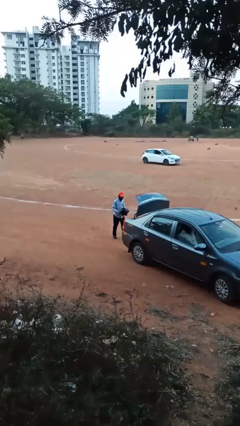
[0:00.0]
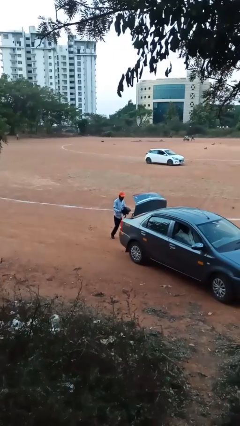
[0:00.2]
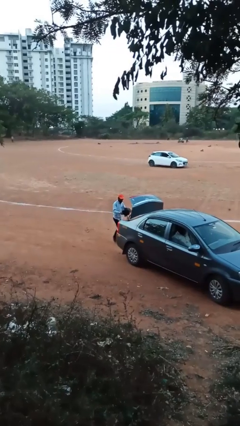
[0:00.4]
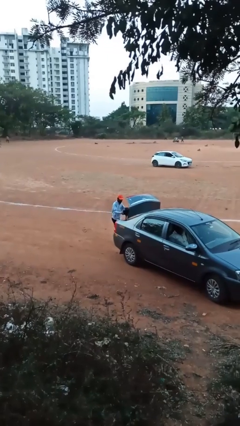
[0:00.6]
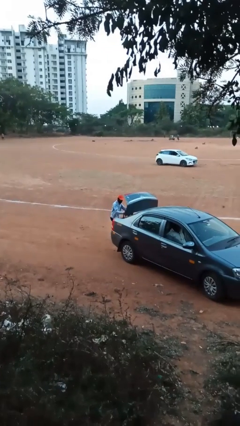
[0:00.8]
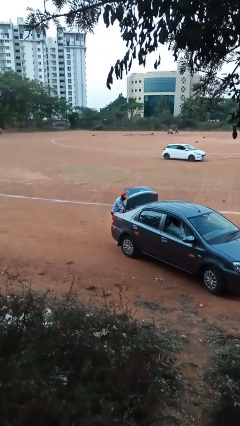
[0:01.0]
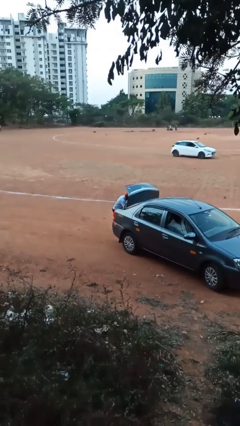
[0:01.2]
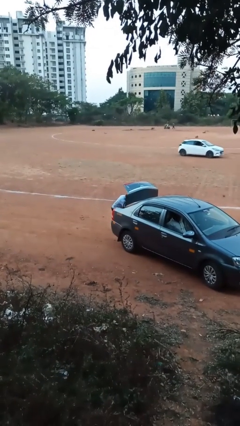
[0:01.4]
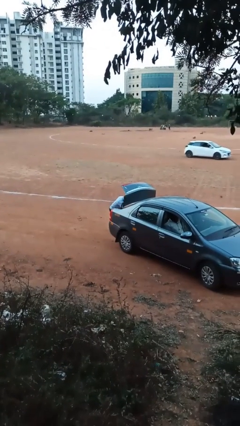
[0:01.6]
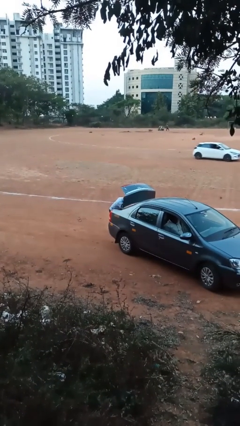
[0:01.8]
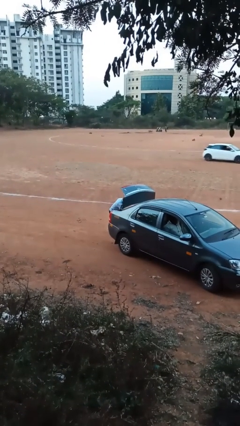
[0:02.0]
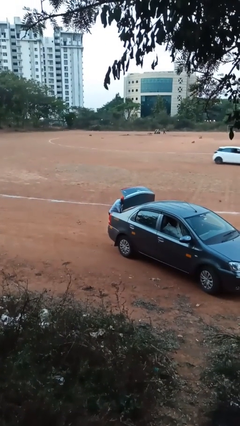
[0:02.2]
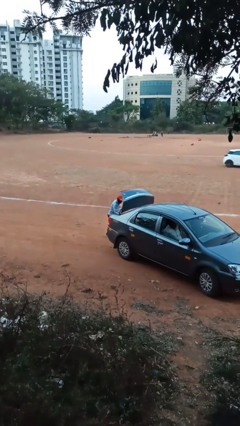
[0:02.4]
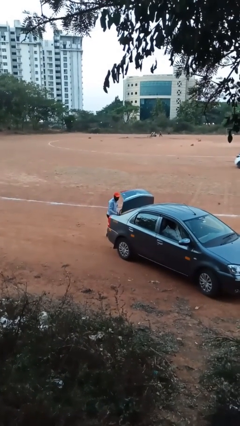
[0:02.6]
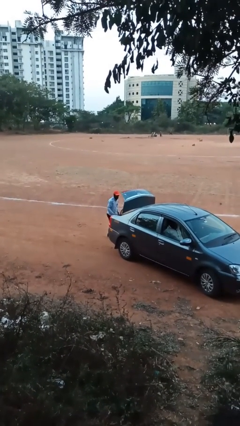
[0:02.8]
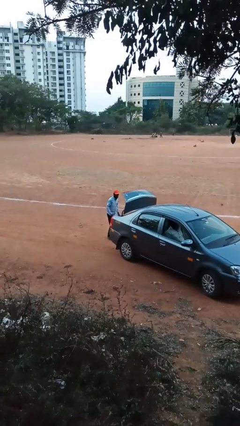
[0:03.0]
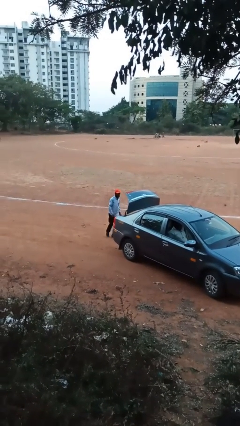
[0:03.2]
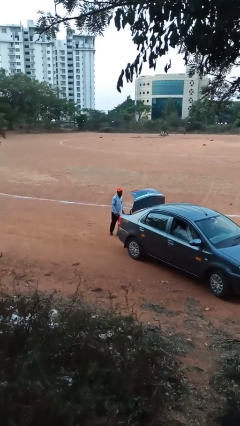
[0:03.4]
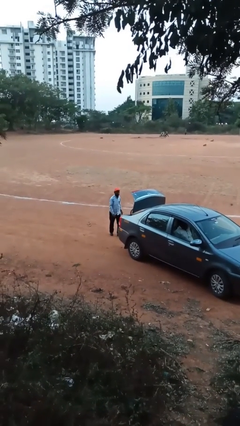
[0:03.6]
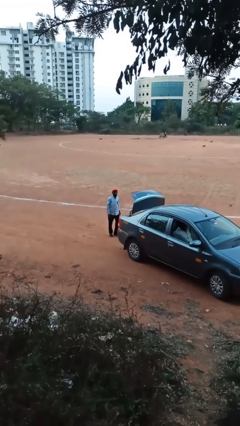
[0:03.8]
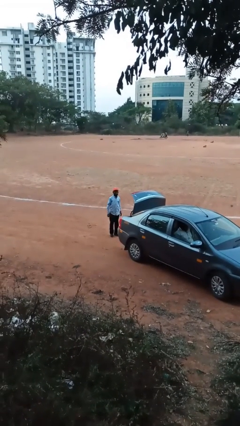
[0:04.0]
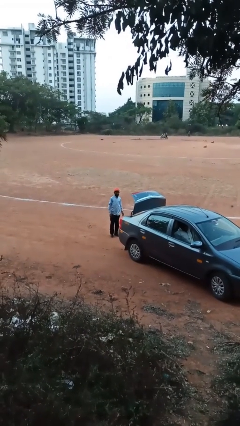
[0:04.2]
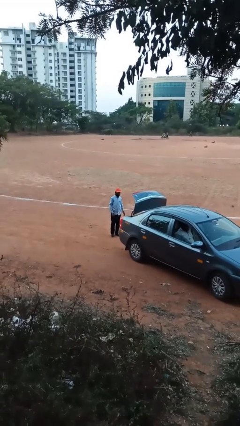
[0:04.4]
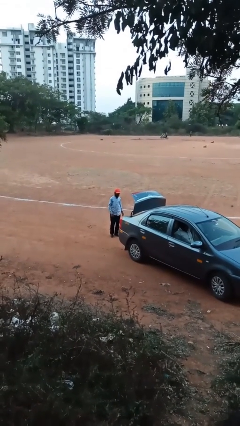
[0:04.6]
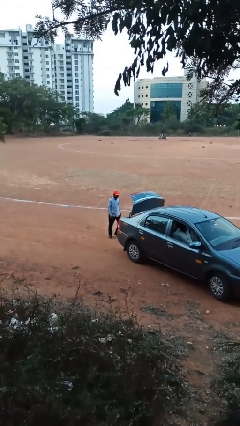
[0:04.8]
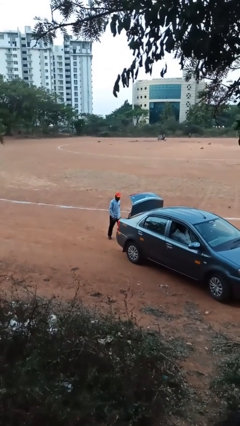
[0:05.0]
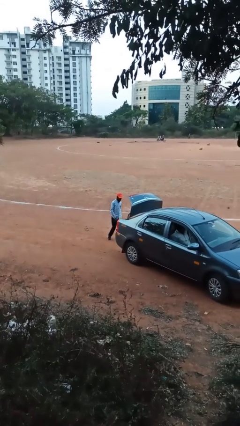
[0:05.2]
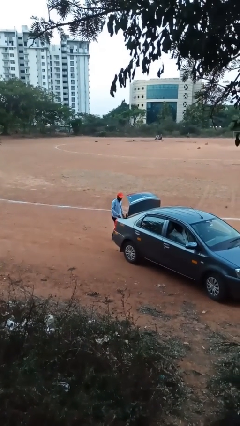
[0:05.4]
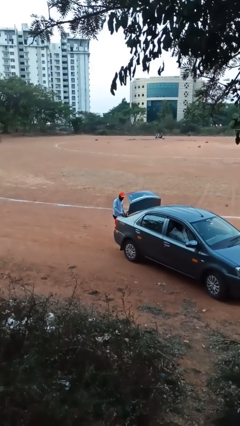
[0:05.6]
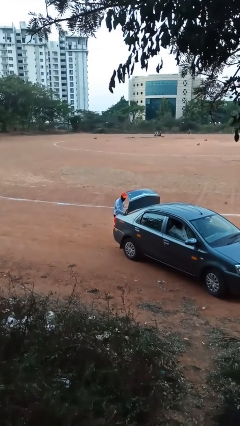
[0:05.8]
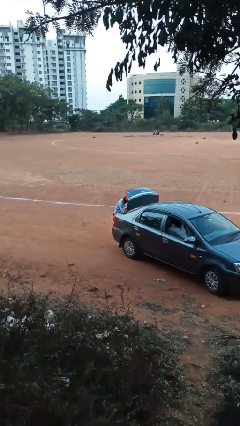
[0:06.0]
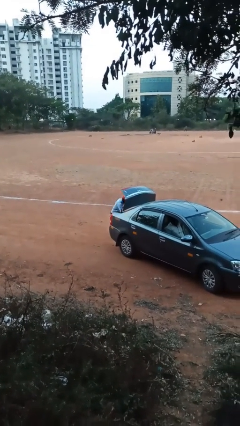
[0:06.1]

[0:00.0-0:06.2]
person loads car

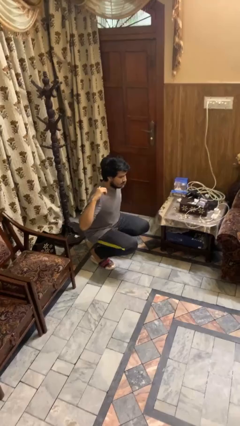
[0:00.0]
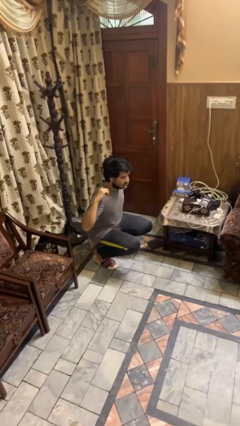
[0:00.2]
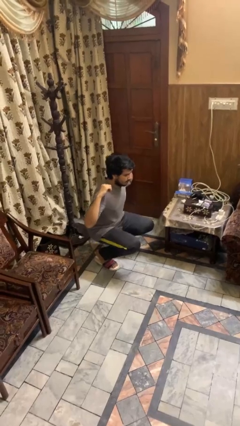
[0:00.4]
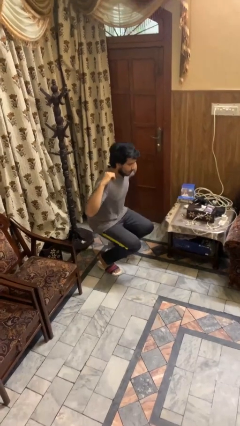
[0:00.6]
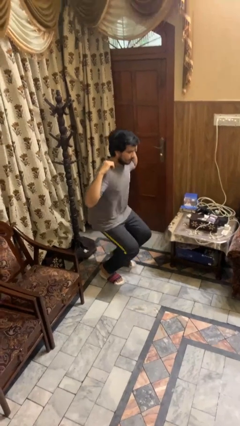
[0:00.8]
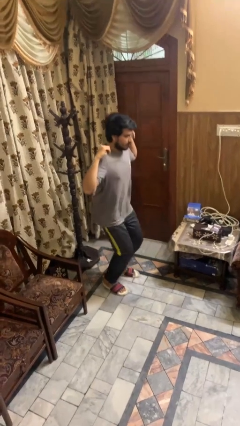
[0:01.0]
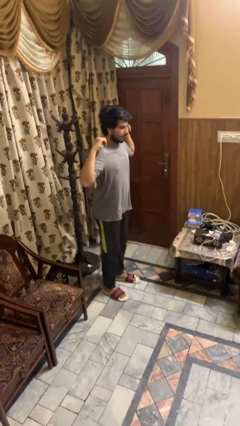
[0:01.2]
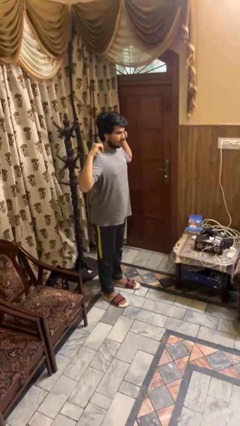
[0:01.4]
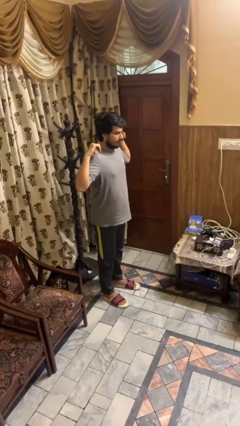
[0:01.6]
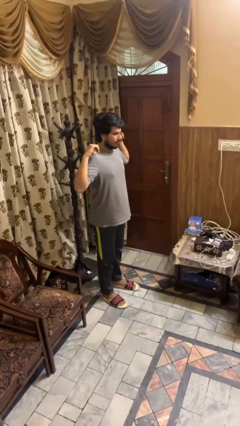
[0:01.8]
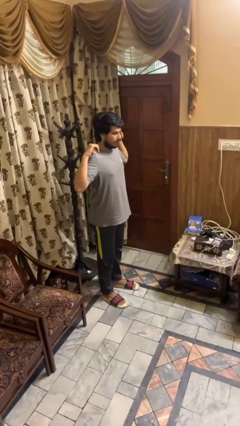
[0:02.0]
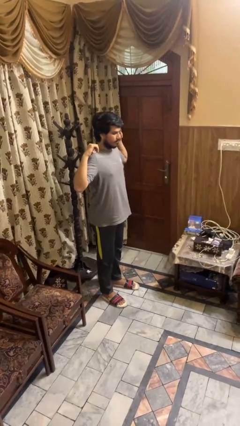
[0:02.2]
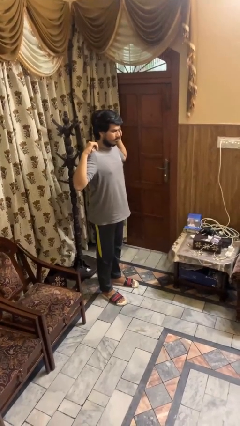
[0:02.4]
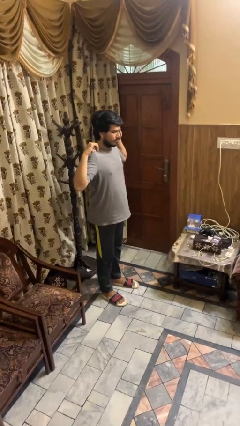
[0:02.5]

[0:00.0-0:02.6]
person stands up

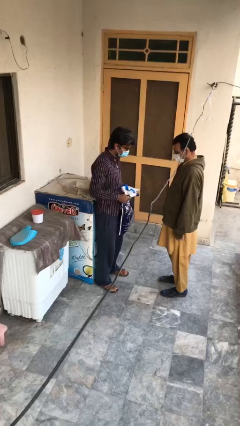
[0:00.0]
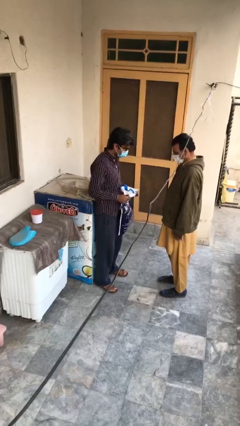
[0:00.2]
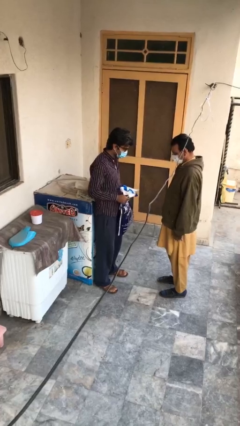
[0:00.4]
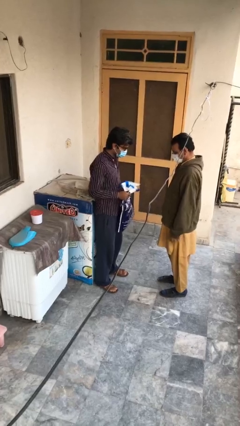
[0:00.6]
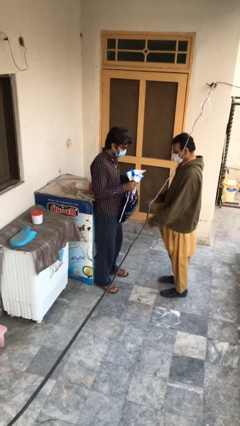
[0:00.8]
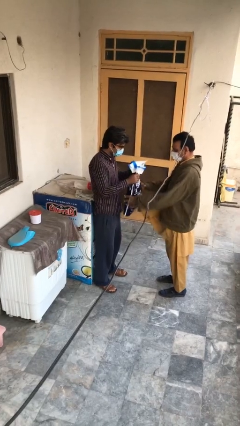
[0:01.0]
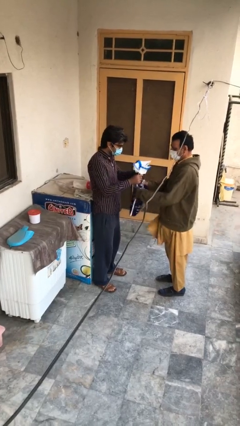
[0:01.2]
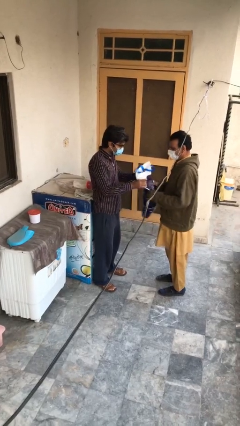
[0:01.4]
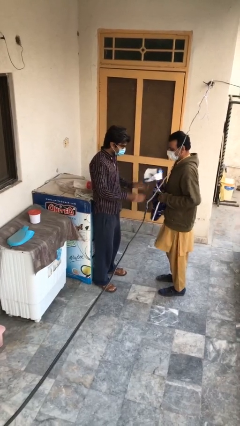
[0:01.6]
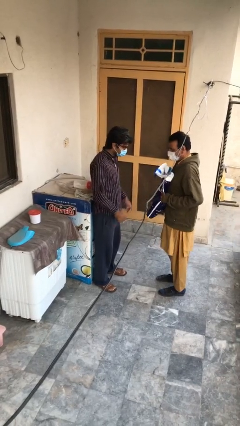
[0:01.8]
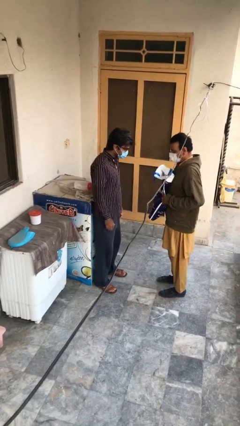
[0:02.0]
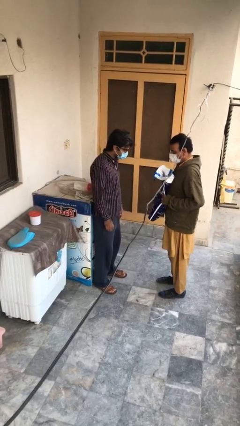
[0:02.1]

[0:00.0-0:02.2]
person transfers object to person

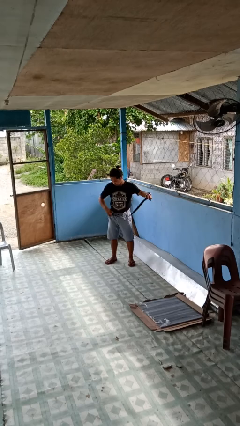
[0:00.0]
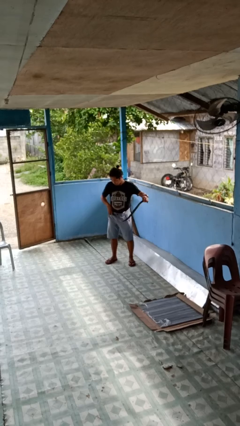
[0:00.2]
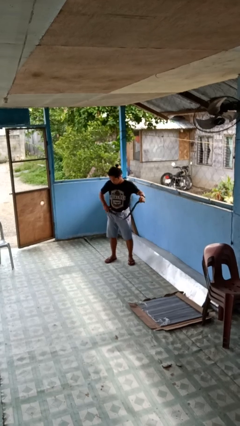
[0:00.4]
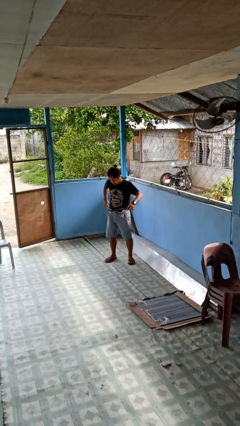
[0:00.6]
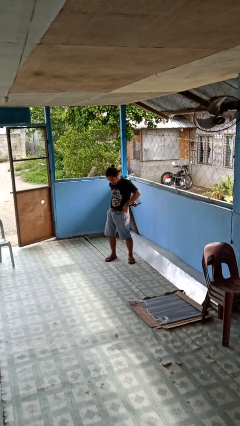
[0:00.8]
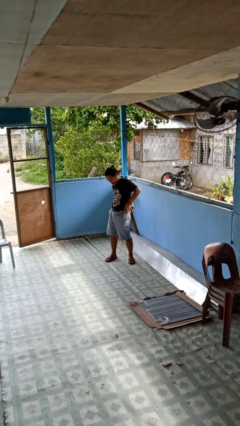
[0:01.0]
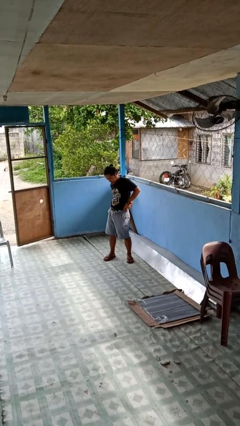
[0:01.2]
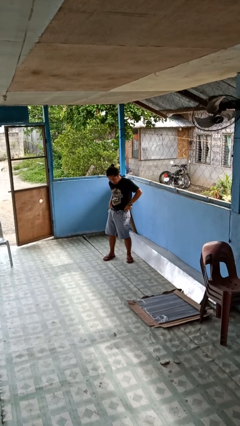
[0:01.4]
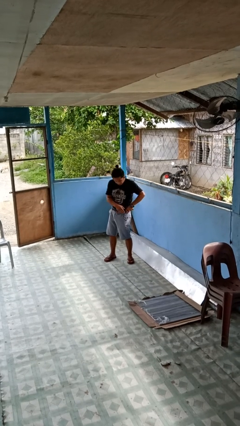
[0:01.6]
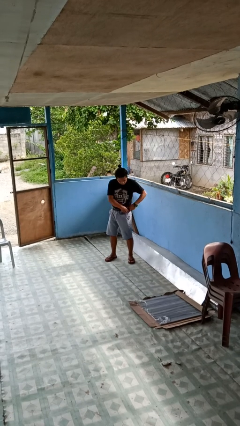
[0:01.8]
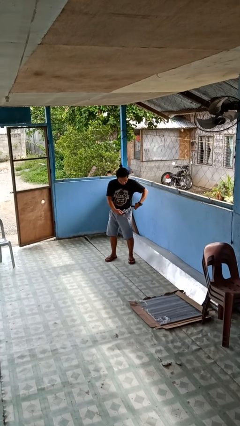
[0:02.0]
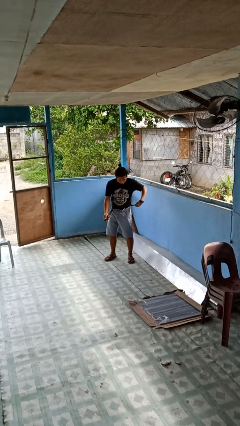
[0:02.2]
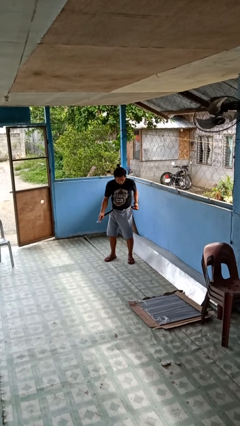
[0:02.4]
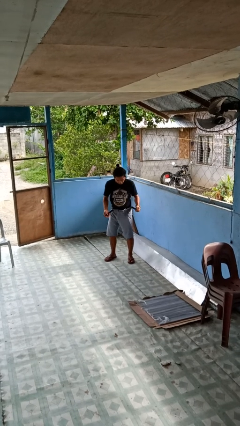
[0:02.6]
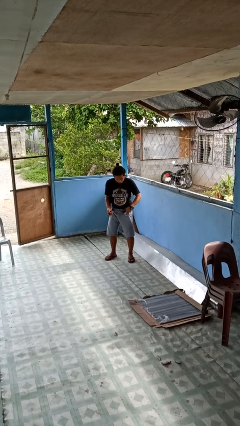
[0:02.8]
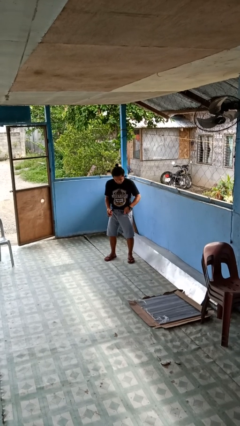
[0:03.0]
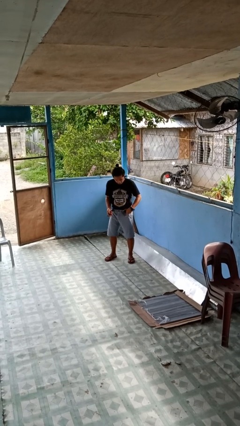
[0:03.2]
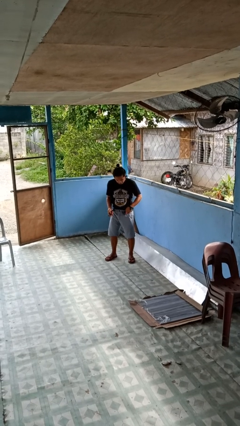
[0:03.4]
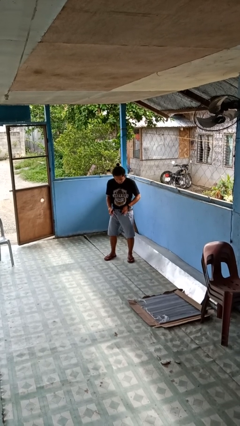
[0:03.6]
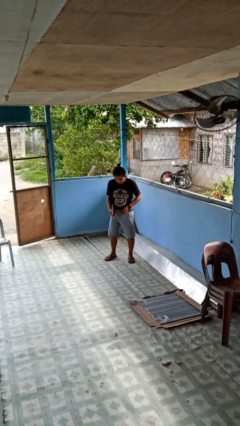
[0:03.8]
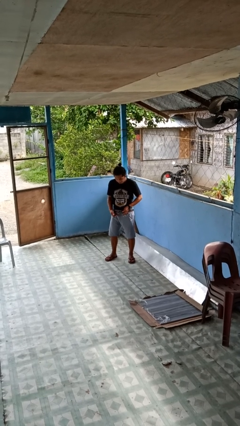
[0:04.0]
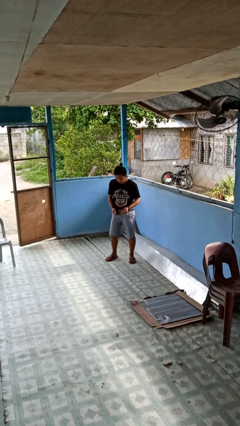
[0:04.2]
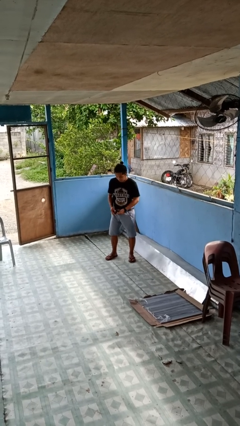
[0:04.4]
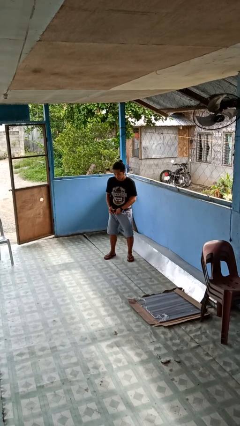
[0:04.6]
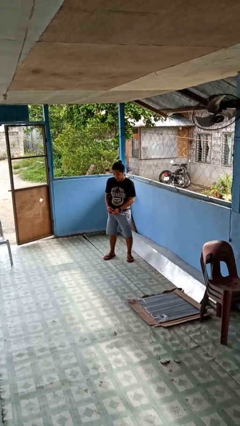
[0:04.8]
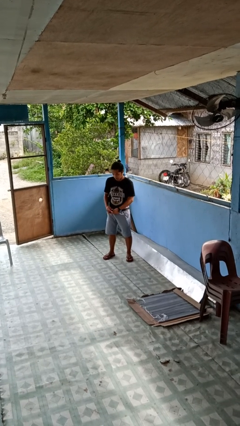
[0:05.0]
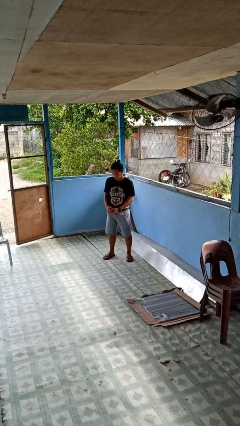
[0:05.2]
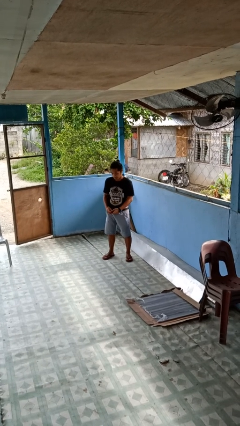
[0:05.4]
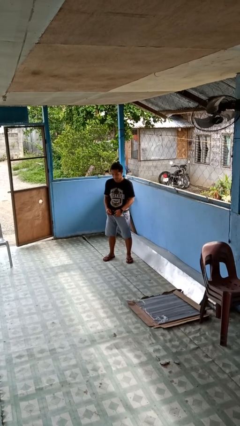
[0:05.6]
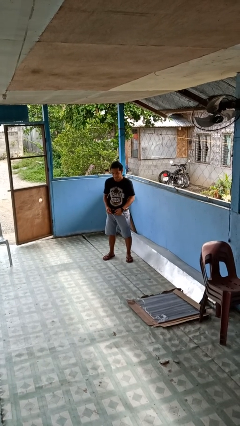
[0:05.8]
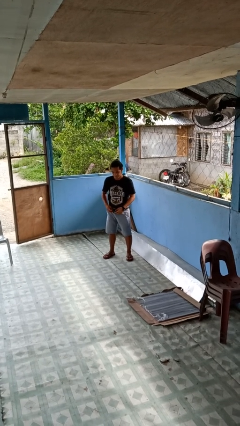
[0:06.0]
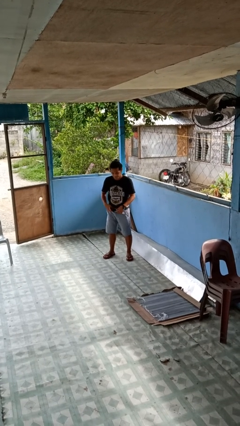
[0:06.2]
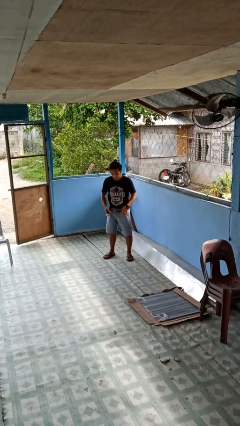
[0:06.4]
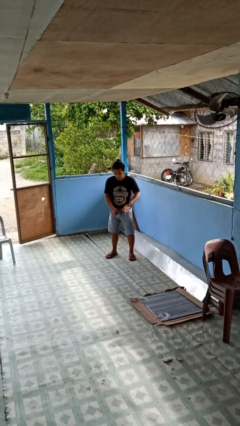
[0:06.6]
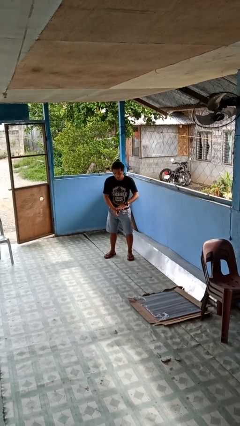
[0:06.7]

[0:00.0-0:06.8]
person puts on belt
